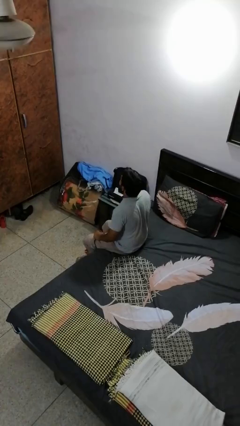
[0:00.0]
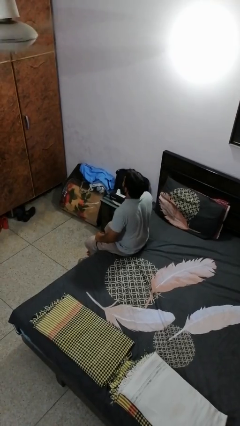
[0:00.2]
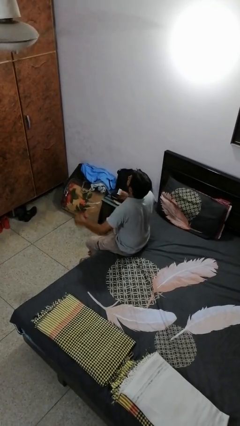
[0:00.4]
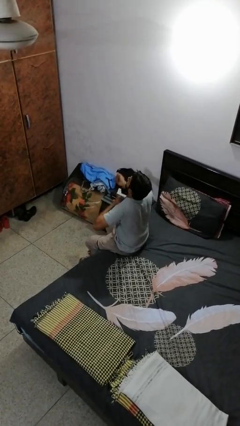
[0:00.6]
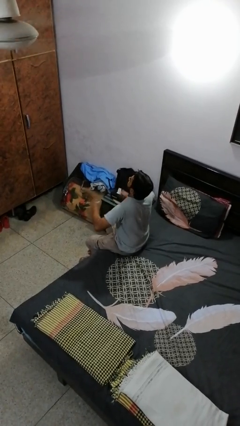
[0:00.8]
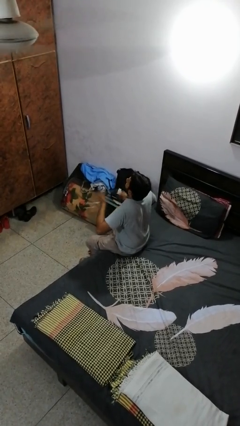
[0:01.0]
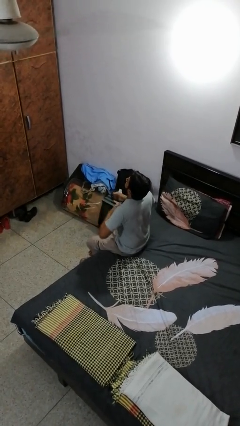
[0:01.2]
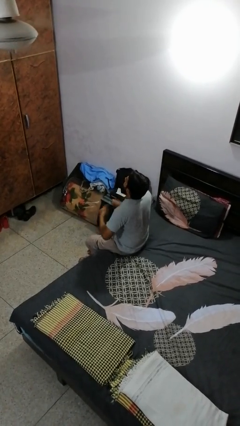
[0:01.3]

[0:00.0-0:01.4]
person drums on chest

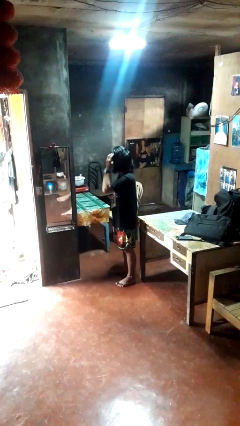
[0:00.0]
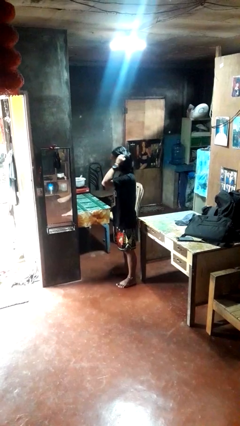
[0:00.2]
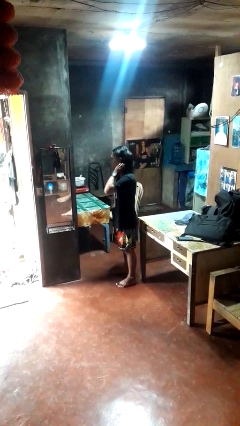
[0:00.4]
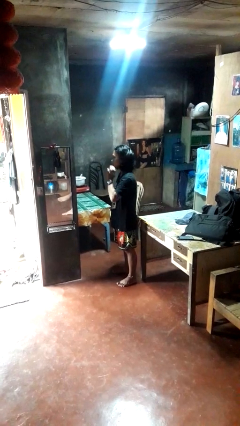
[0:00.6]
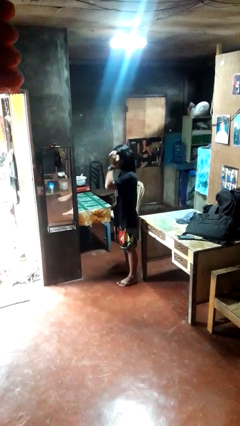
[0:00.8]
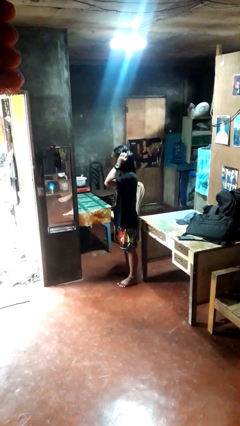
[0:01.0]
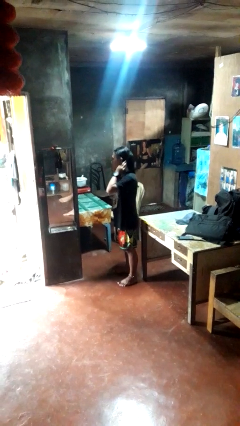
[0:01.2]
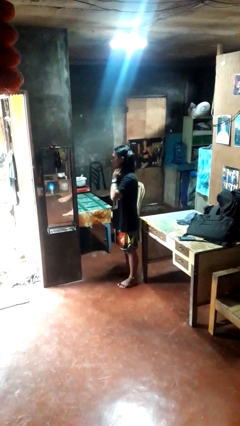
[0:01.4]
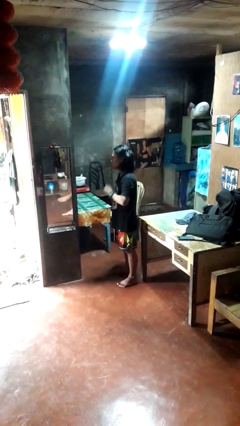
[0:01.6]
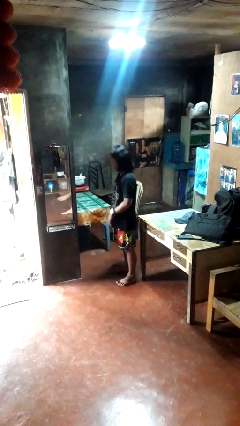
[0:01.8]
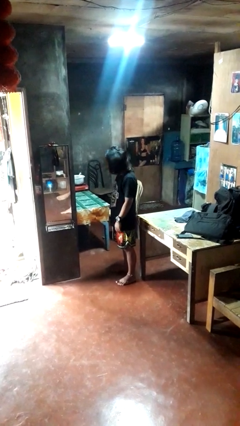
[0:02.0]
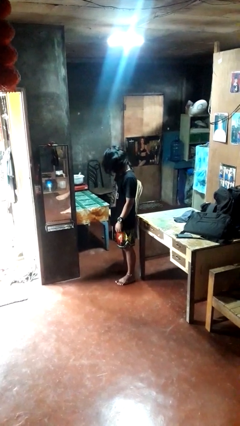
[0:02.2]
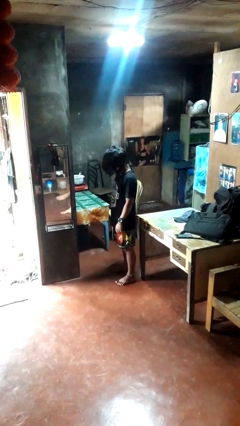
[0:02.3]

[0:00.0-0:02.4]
person strokes hair

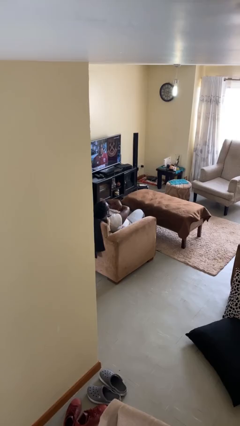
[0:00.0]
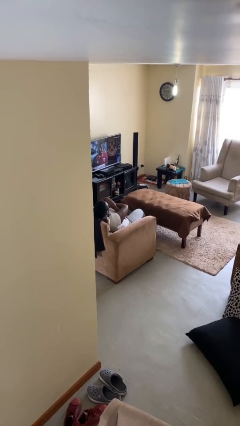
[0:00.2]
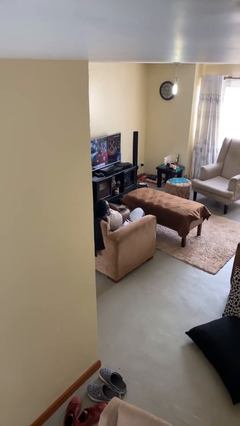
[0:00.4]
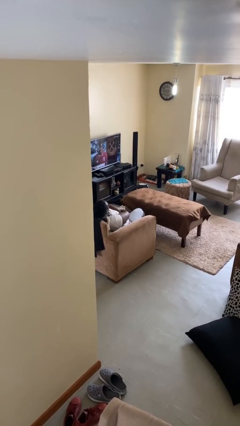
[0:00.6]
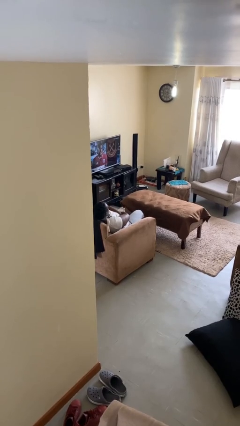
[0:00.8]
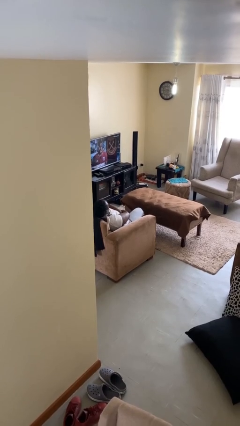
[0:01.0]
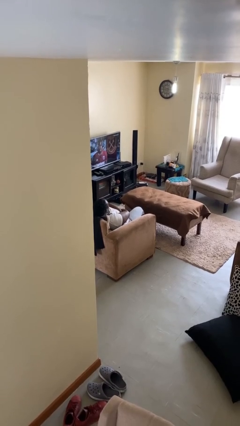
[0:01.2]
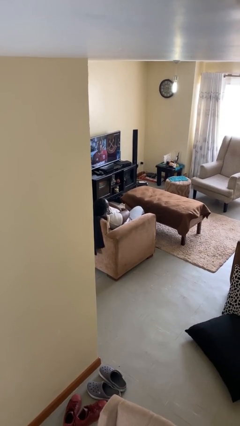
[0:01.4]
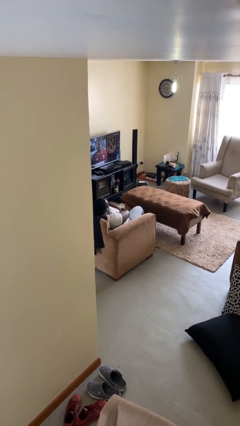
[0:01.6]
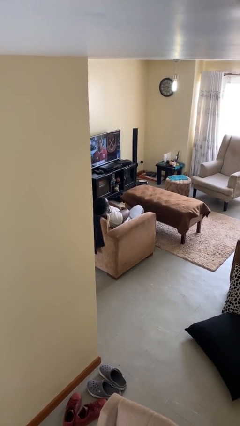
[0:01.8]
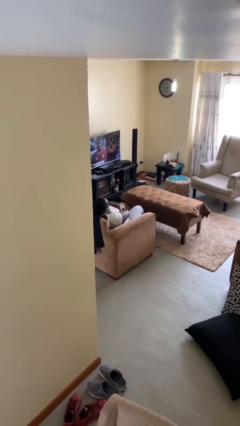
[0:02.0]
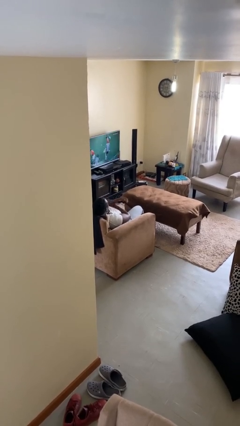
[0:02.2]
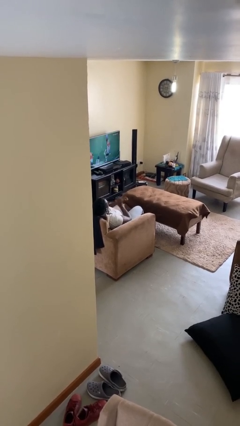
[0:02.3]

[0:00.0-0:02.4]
person crosses arms

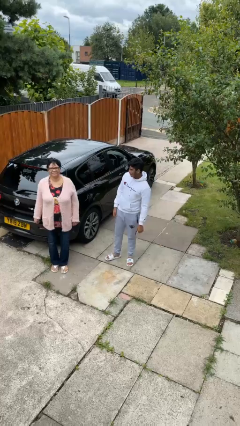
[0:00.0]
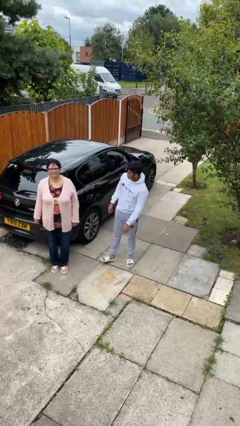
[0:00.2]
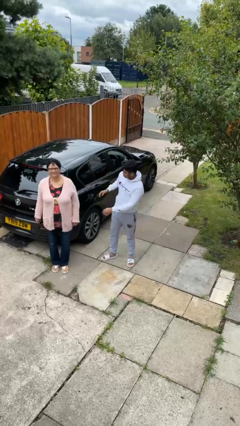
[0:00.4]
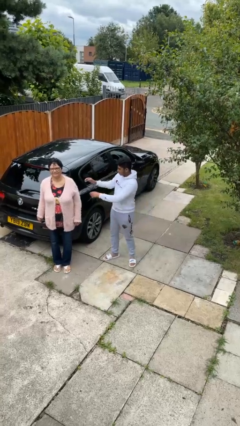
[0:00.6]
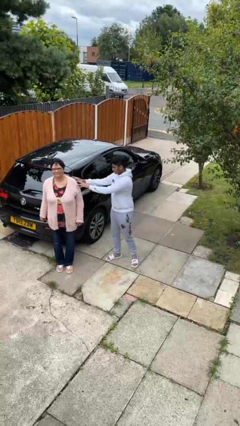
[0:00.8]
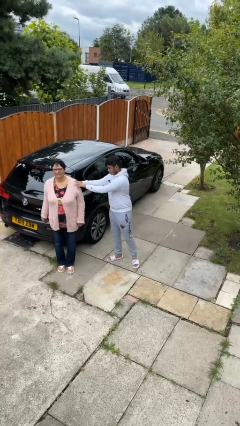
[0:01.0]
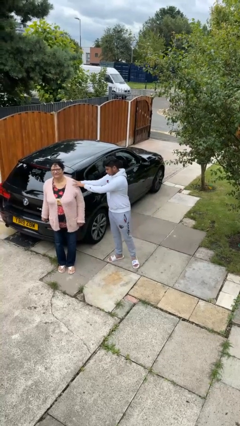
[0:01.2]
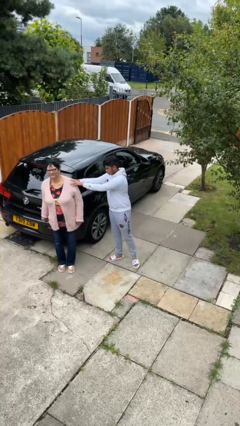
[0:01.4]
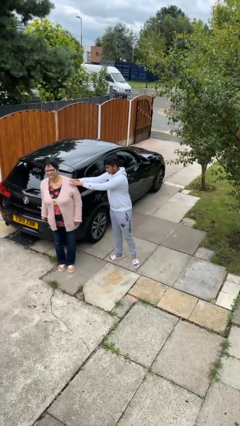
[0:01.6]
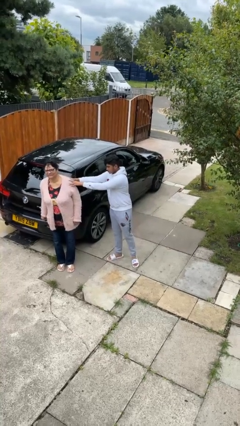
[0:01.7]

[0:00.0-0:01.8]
person shoves person

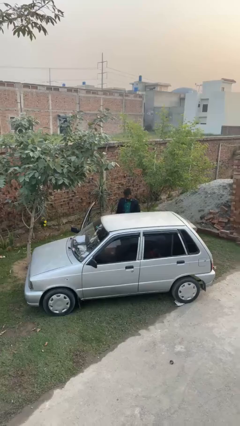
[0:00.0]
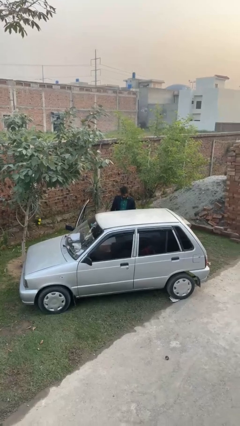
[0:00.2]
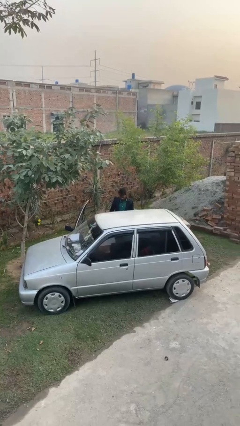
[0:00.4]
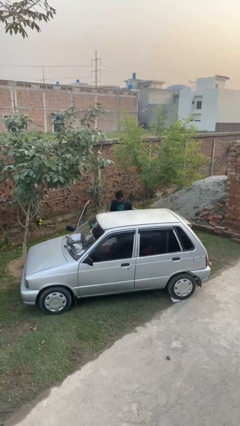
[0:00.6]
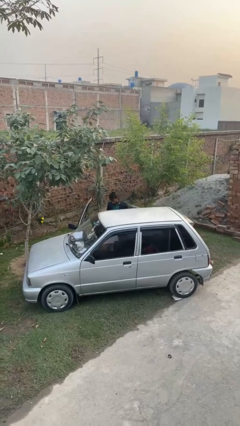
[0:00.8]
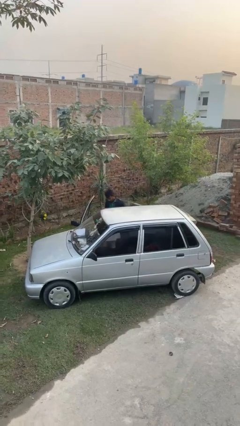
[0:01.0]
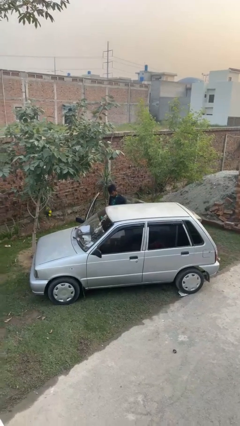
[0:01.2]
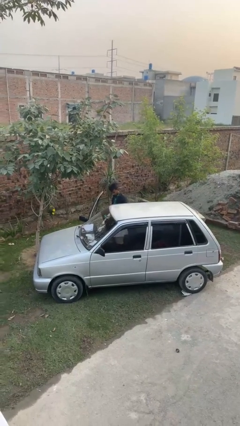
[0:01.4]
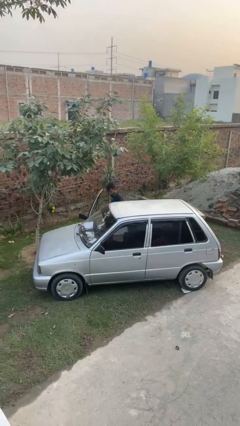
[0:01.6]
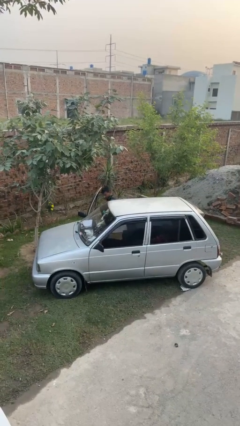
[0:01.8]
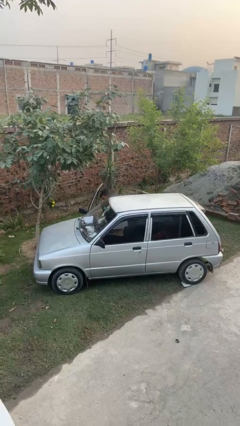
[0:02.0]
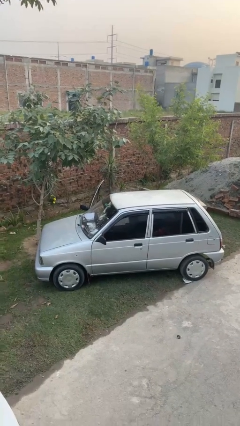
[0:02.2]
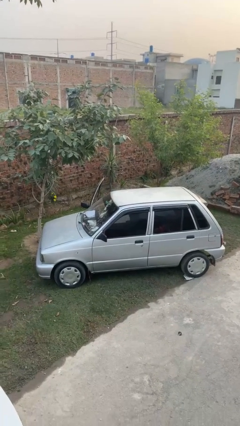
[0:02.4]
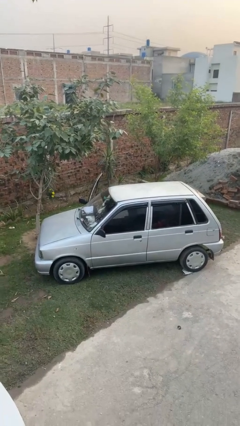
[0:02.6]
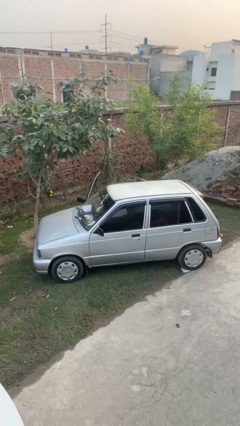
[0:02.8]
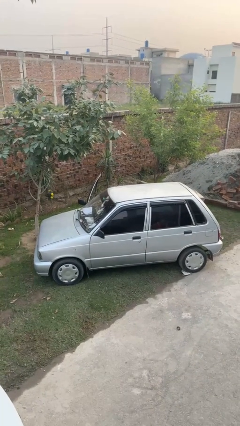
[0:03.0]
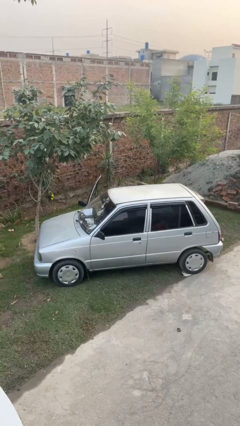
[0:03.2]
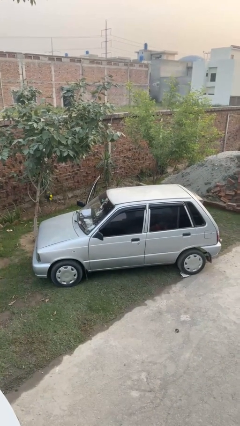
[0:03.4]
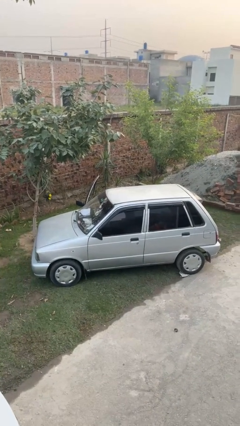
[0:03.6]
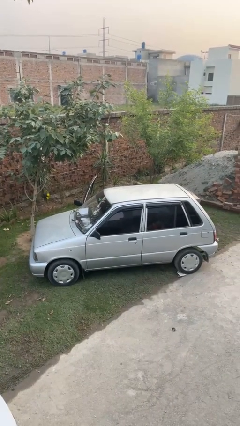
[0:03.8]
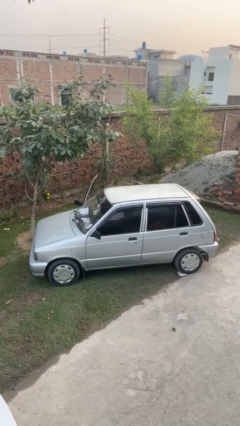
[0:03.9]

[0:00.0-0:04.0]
person enters car

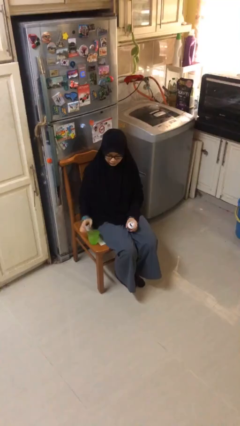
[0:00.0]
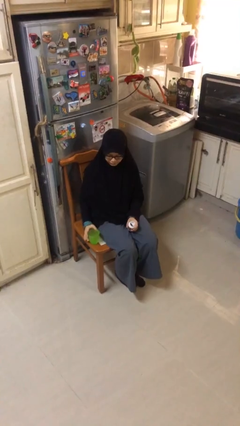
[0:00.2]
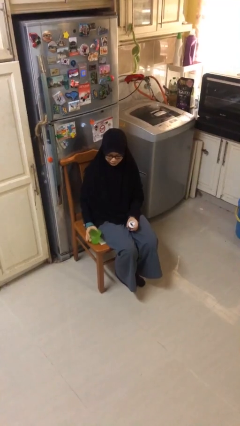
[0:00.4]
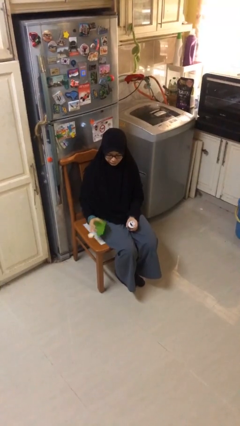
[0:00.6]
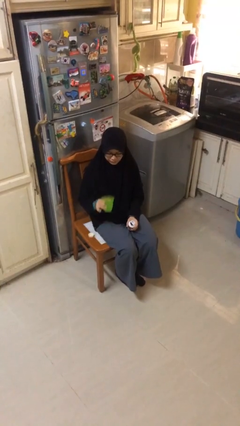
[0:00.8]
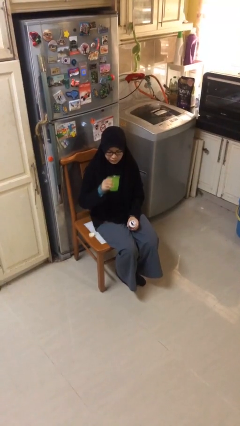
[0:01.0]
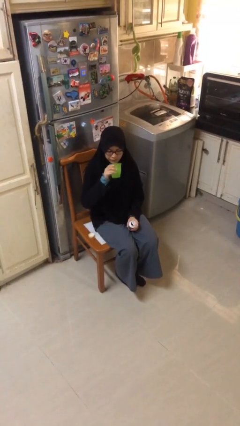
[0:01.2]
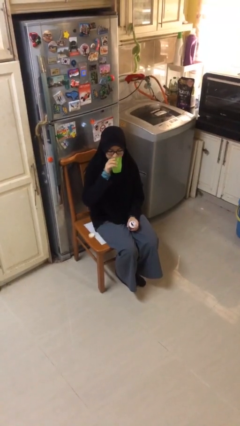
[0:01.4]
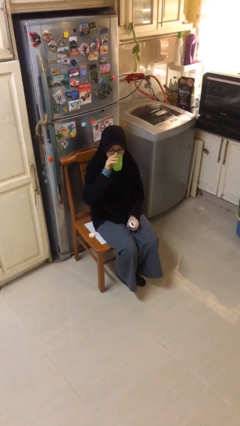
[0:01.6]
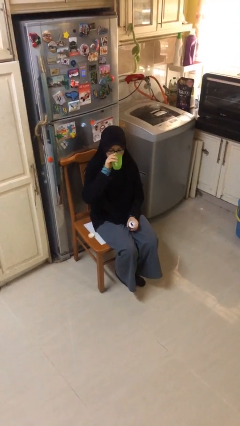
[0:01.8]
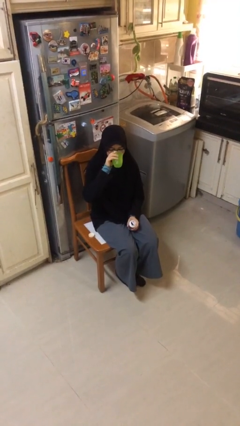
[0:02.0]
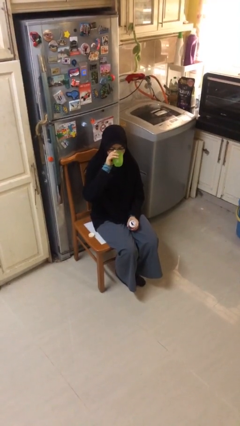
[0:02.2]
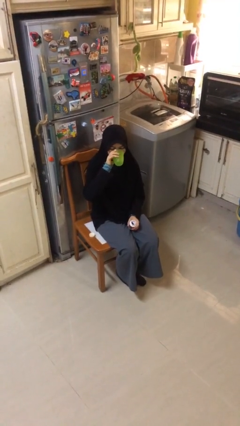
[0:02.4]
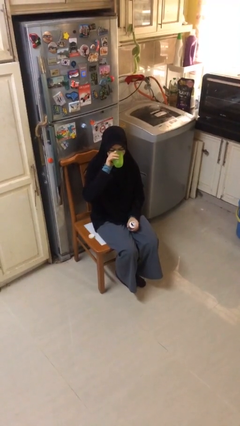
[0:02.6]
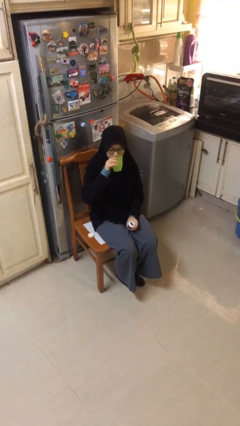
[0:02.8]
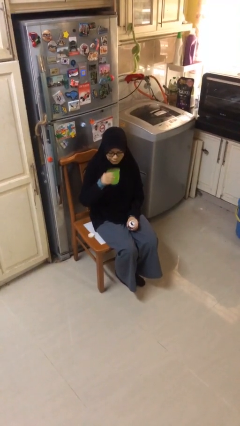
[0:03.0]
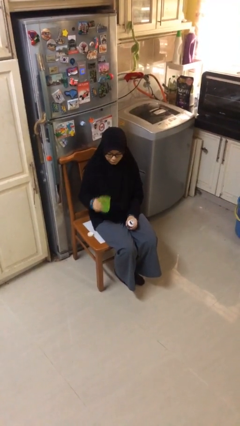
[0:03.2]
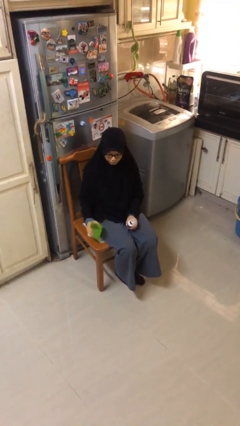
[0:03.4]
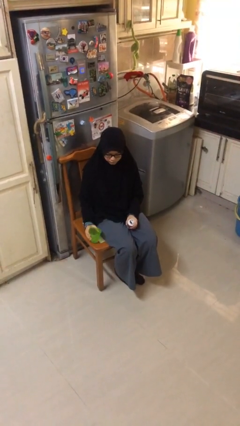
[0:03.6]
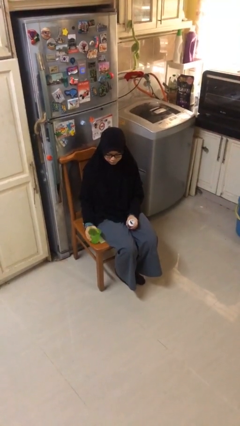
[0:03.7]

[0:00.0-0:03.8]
person drinks from cup

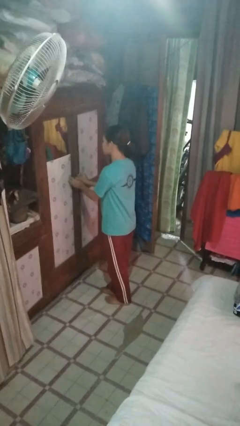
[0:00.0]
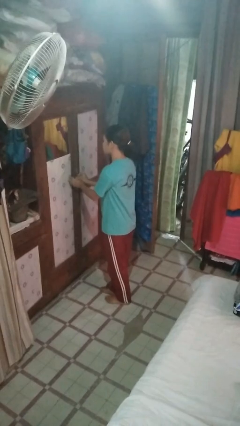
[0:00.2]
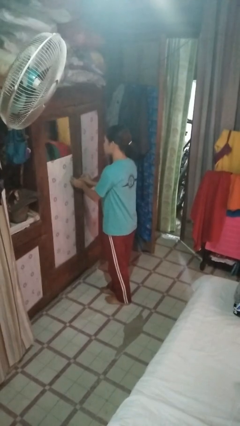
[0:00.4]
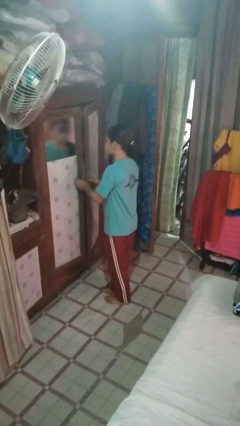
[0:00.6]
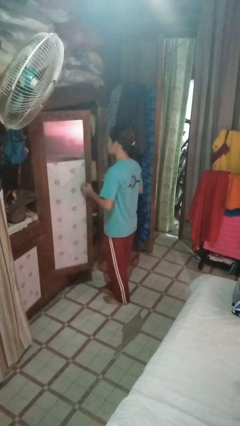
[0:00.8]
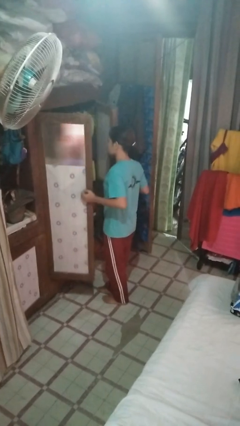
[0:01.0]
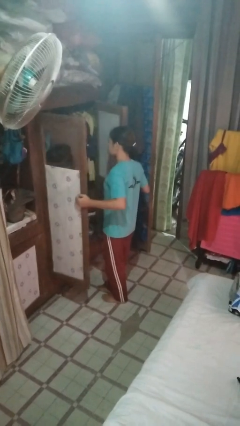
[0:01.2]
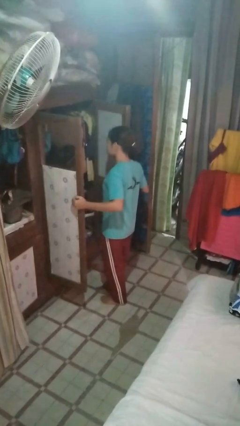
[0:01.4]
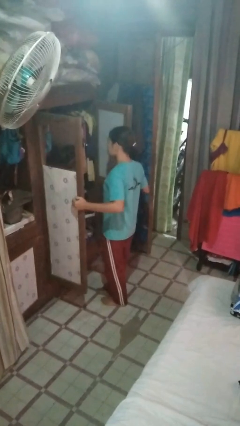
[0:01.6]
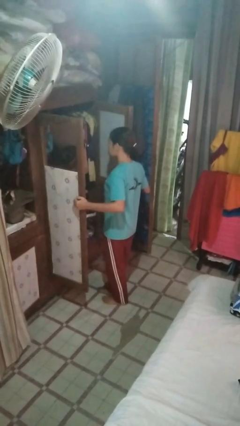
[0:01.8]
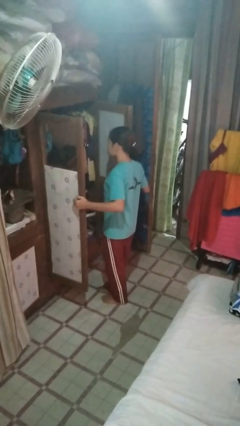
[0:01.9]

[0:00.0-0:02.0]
person opens closet door
